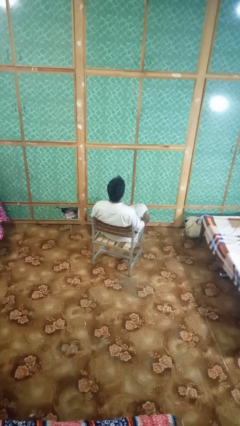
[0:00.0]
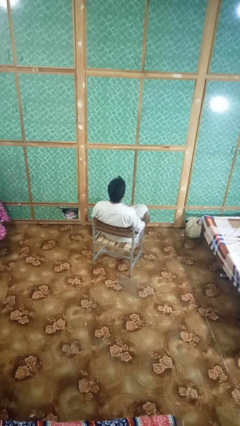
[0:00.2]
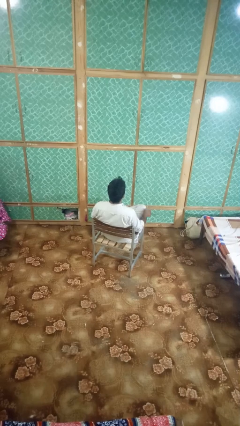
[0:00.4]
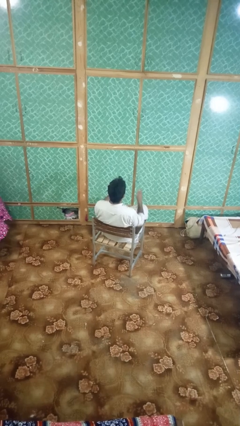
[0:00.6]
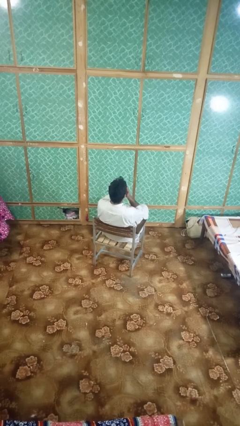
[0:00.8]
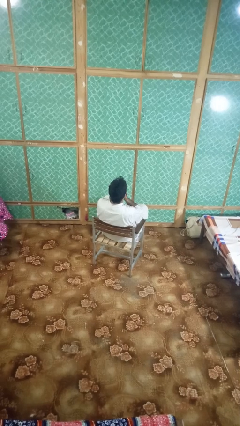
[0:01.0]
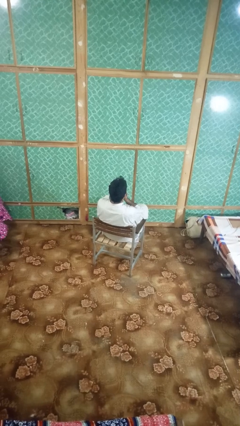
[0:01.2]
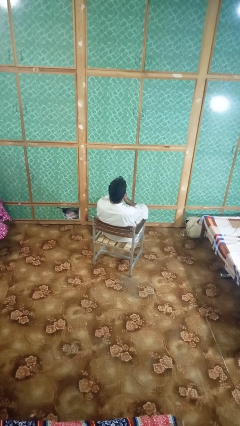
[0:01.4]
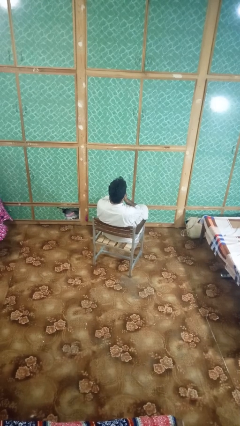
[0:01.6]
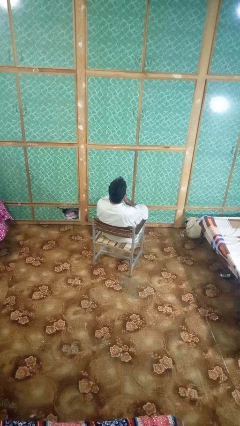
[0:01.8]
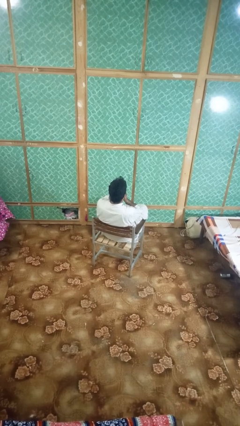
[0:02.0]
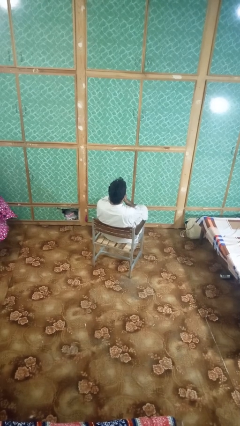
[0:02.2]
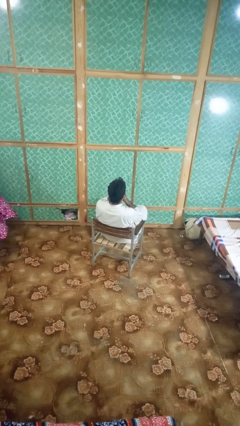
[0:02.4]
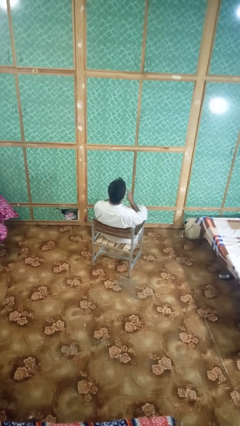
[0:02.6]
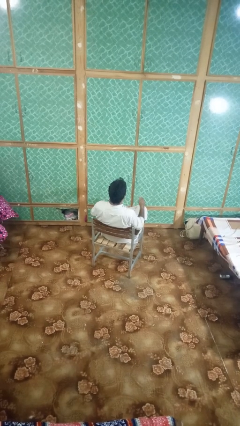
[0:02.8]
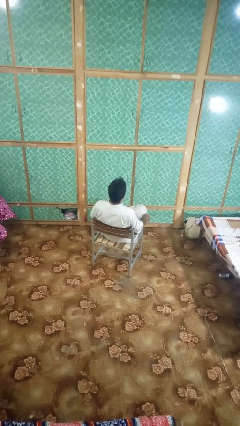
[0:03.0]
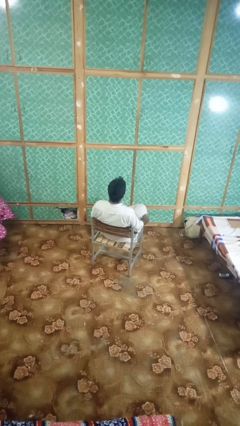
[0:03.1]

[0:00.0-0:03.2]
person sneezes into hand

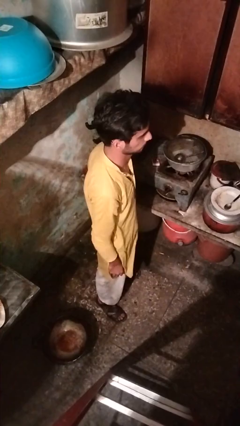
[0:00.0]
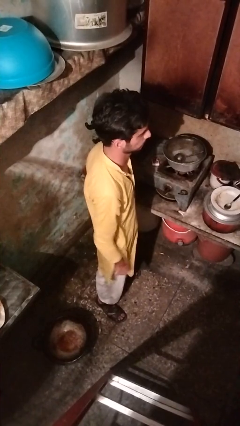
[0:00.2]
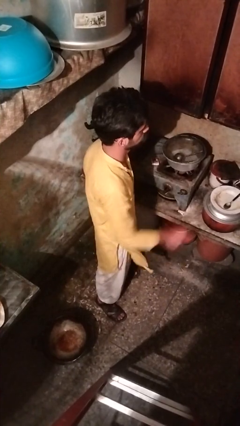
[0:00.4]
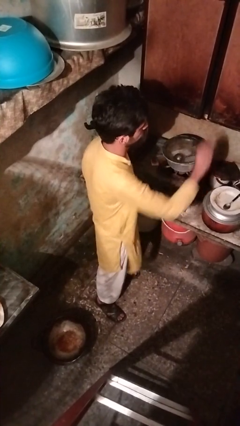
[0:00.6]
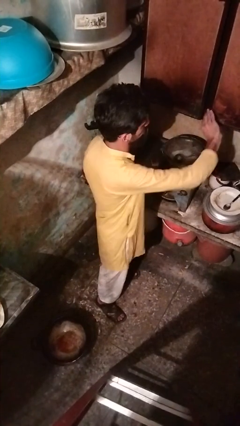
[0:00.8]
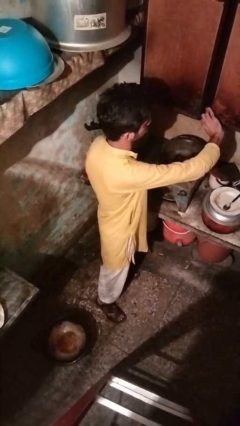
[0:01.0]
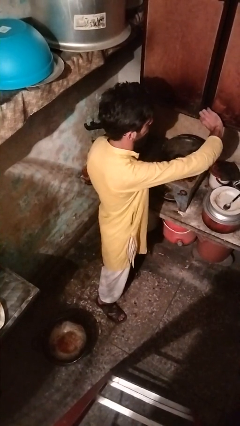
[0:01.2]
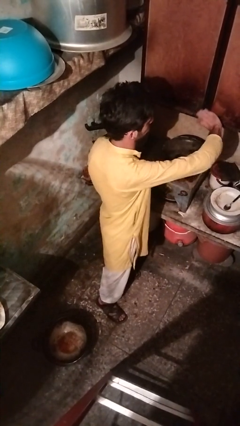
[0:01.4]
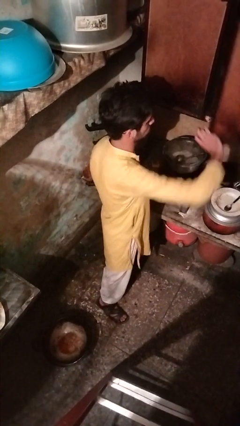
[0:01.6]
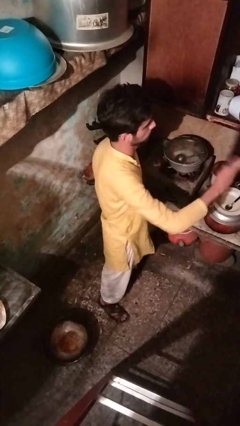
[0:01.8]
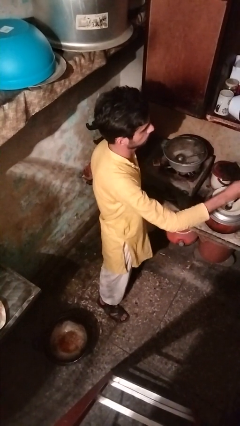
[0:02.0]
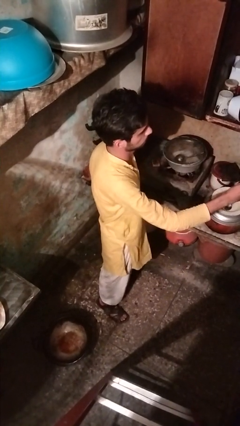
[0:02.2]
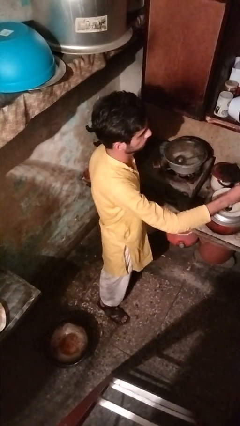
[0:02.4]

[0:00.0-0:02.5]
person opens cabinet

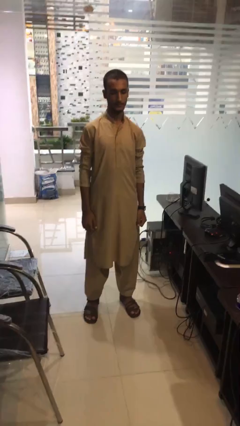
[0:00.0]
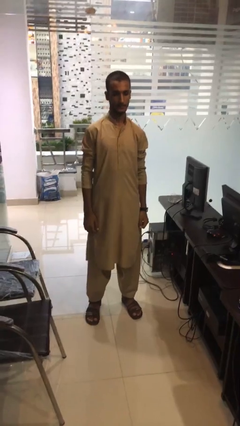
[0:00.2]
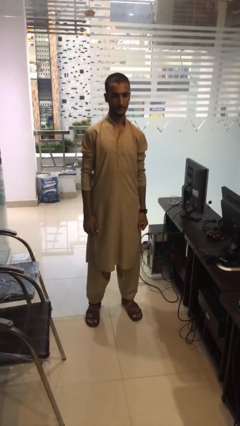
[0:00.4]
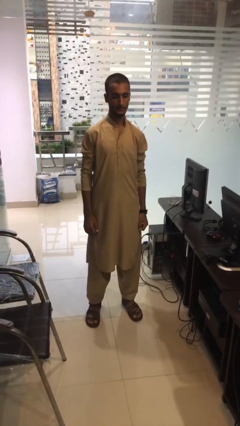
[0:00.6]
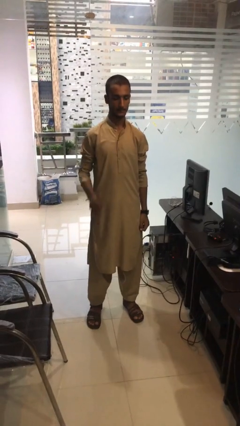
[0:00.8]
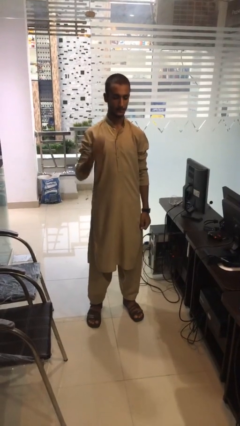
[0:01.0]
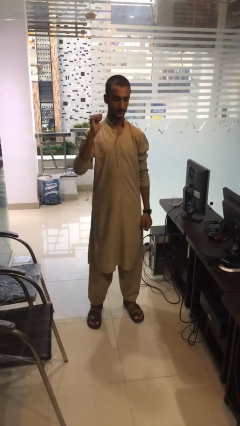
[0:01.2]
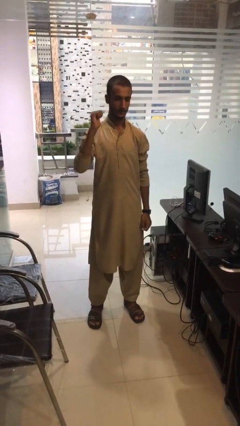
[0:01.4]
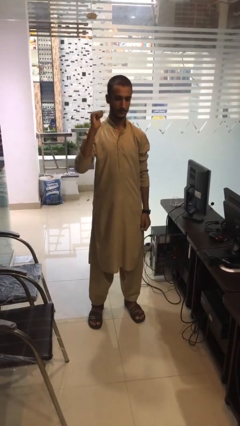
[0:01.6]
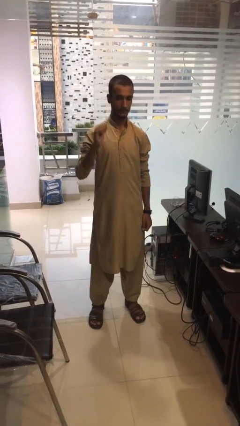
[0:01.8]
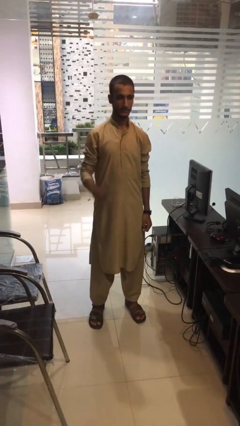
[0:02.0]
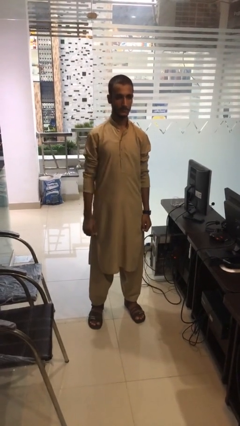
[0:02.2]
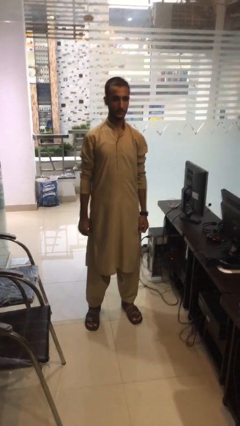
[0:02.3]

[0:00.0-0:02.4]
person gestures behind me

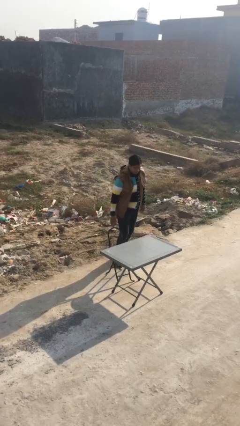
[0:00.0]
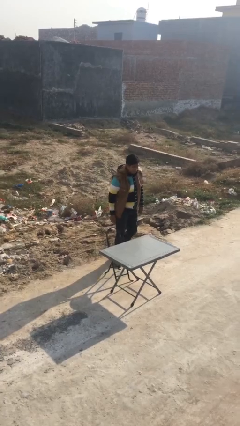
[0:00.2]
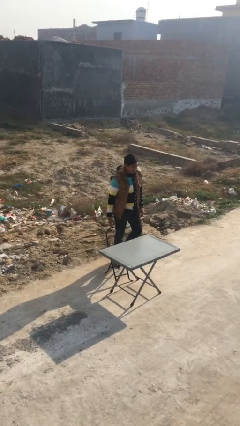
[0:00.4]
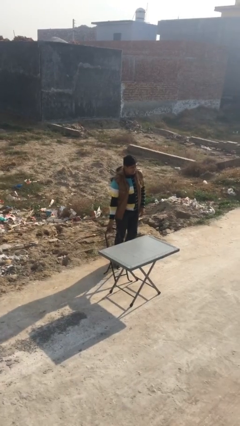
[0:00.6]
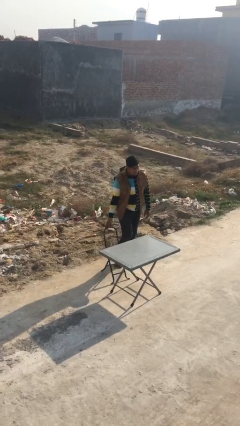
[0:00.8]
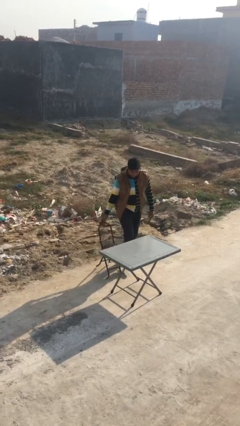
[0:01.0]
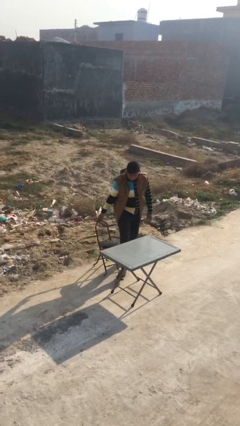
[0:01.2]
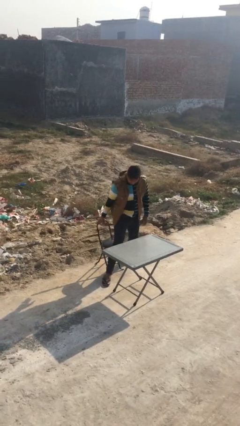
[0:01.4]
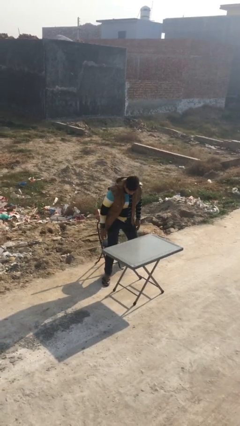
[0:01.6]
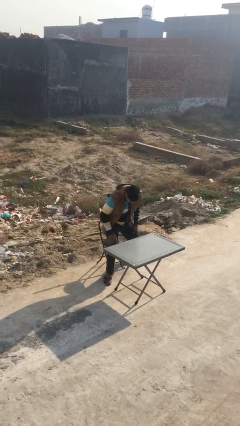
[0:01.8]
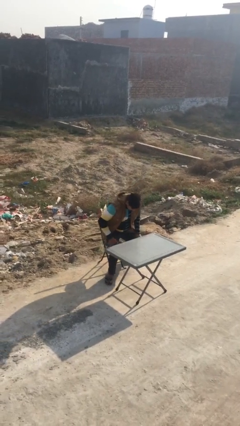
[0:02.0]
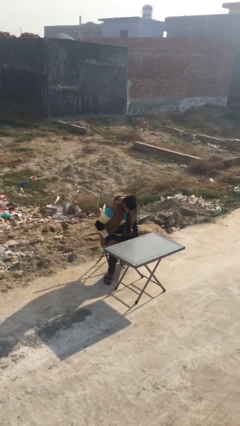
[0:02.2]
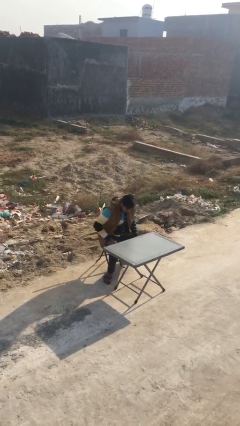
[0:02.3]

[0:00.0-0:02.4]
person sits down

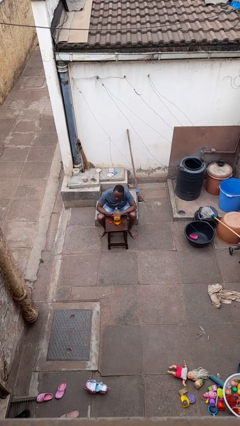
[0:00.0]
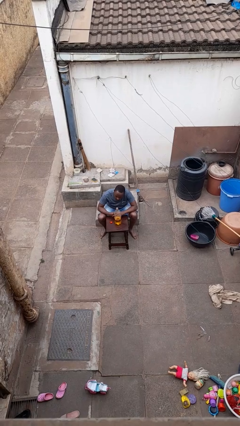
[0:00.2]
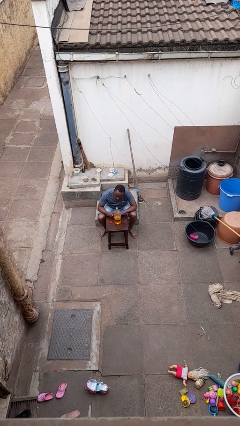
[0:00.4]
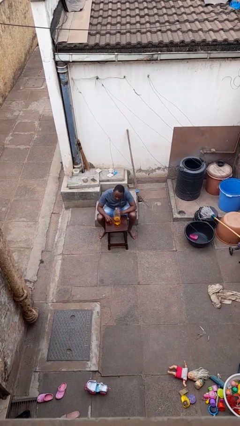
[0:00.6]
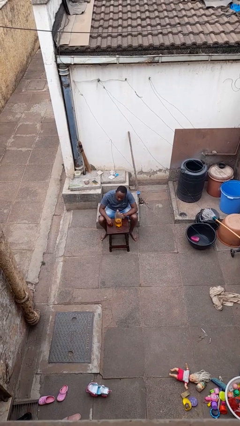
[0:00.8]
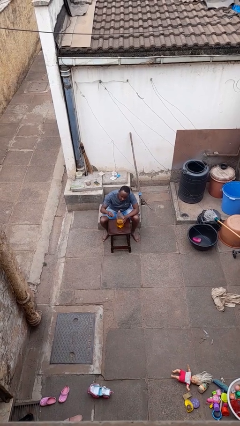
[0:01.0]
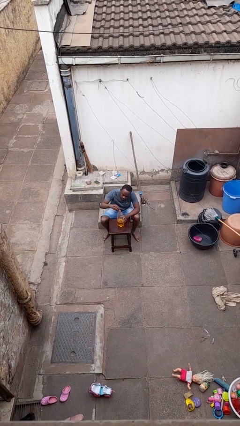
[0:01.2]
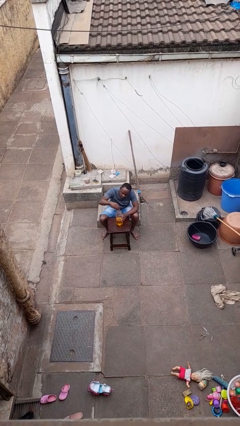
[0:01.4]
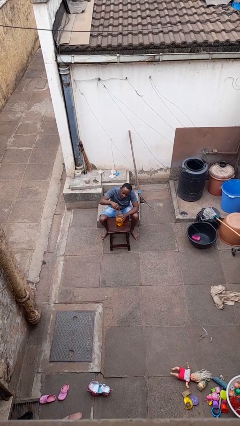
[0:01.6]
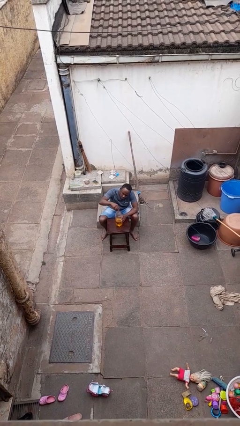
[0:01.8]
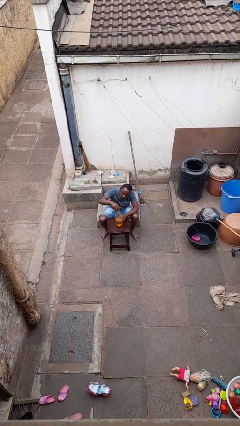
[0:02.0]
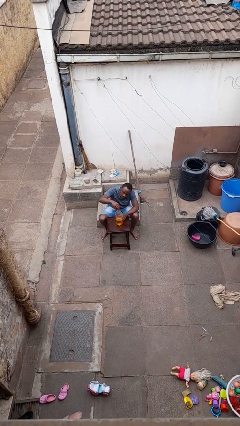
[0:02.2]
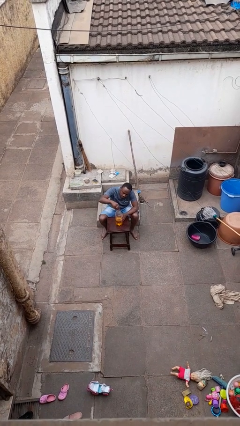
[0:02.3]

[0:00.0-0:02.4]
person screws lid to bottle

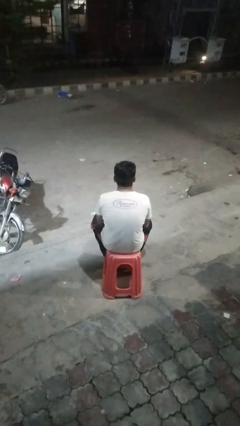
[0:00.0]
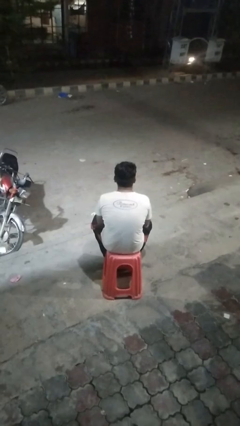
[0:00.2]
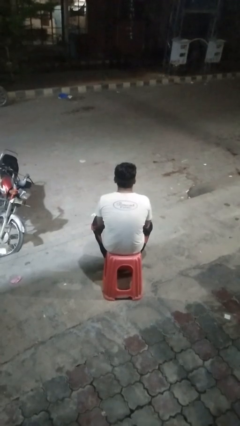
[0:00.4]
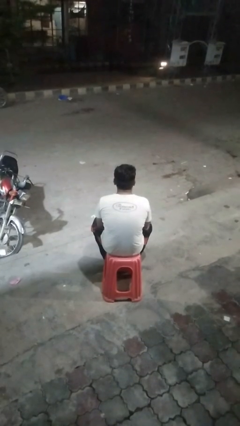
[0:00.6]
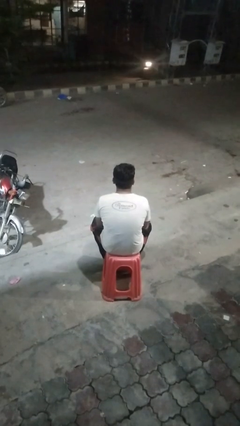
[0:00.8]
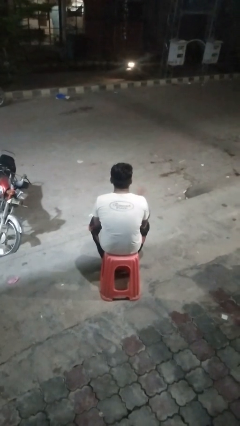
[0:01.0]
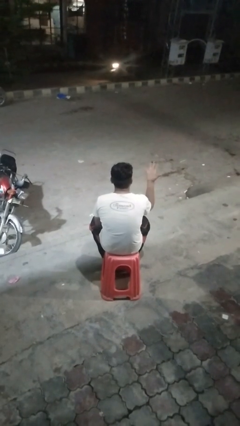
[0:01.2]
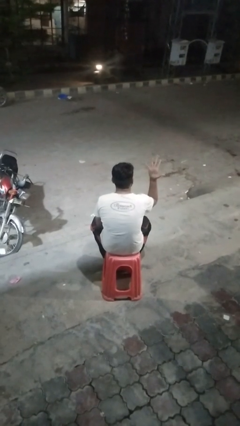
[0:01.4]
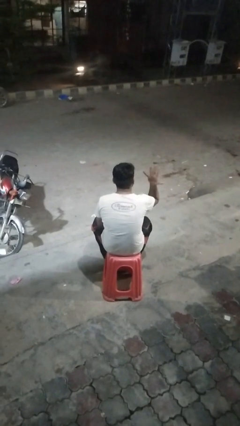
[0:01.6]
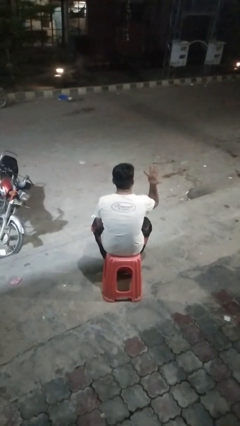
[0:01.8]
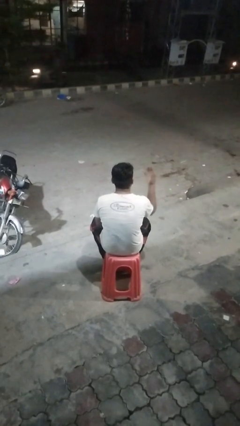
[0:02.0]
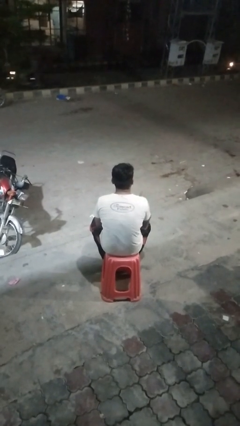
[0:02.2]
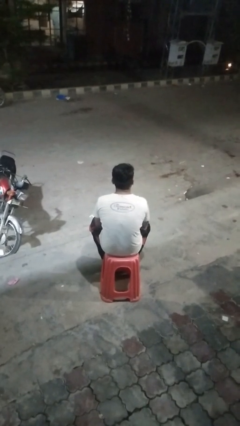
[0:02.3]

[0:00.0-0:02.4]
person gestures number five

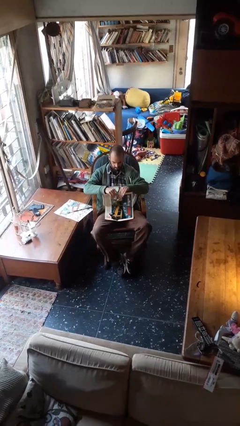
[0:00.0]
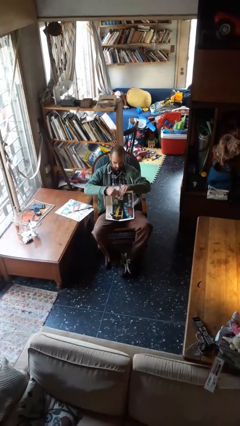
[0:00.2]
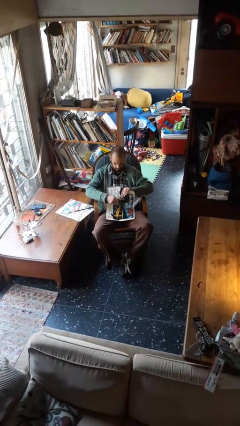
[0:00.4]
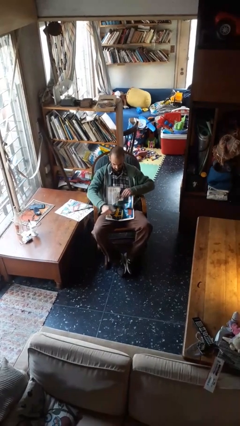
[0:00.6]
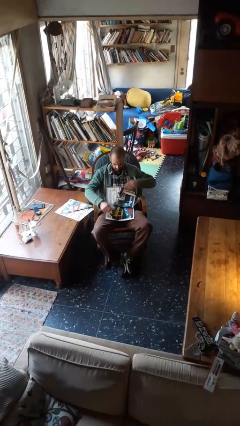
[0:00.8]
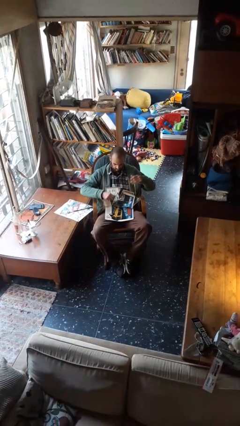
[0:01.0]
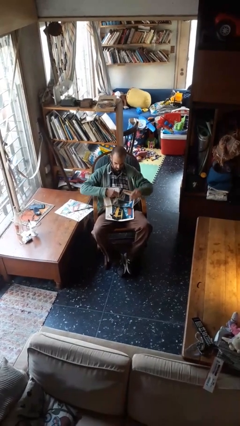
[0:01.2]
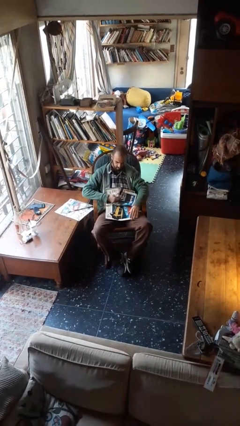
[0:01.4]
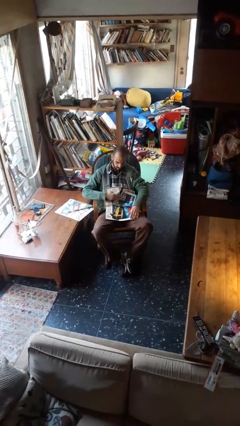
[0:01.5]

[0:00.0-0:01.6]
person tears paper

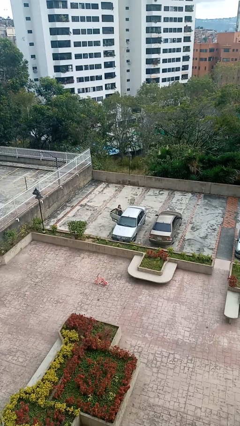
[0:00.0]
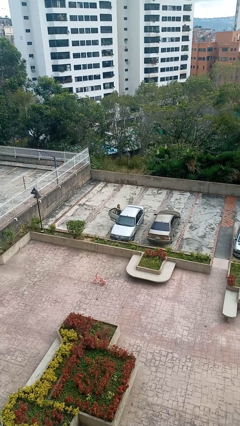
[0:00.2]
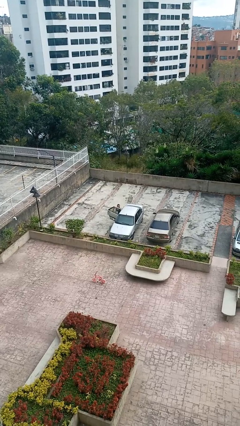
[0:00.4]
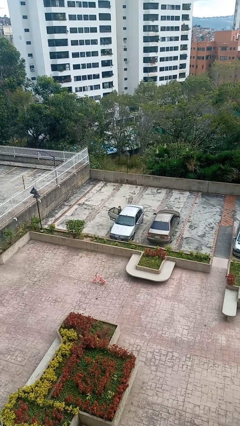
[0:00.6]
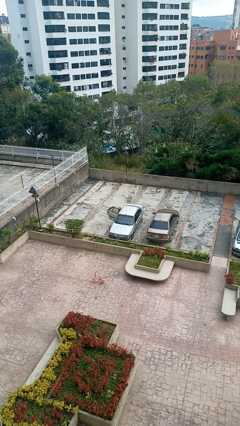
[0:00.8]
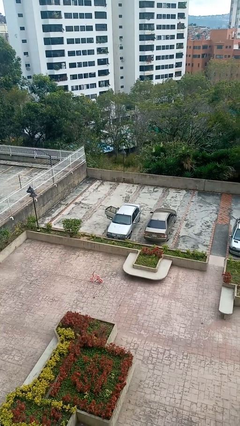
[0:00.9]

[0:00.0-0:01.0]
person enters car
